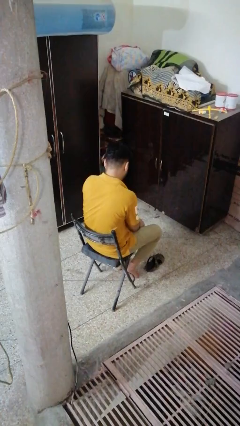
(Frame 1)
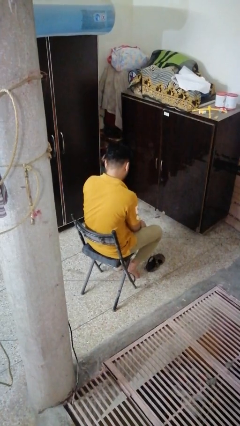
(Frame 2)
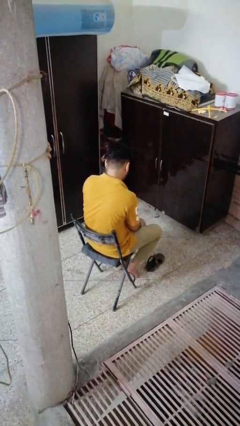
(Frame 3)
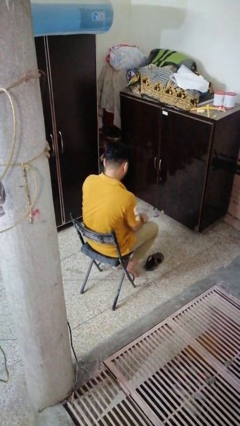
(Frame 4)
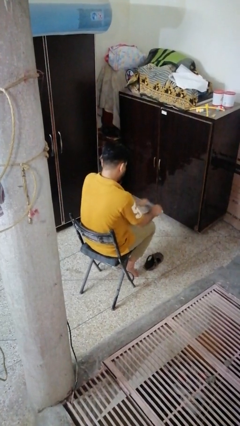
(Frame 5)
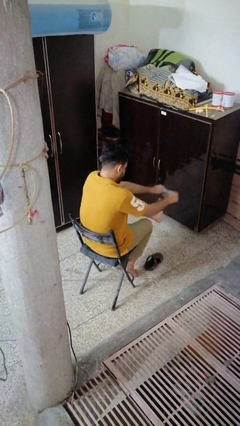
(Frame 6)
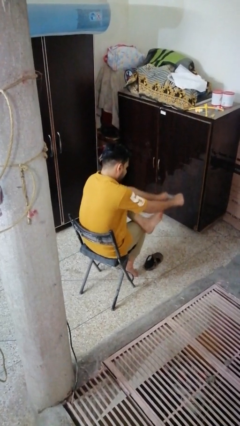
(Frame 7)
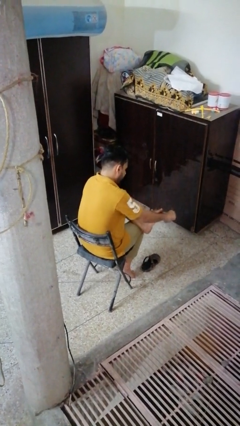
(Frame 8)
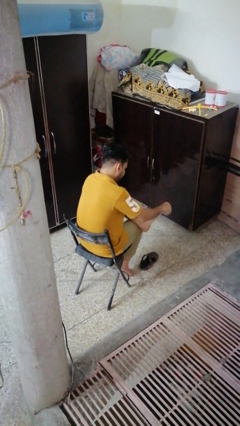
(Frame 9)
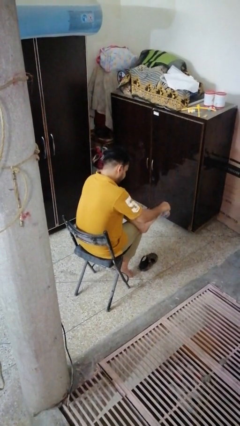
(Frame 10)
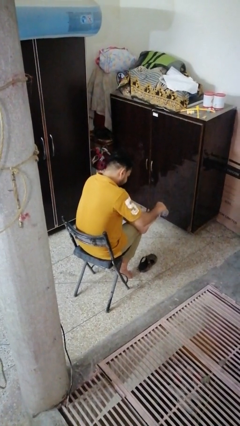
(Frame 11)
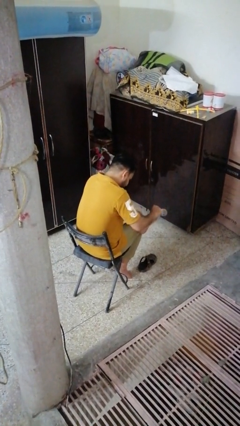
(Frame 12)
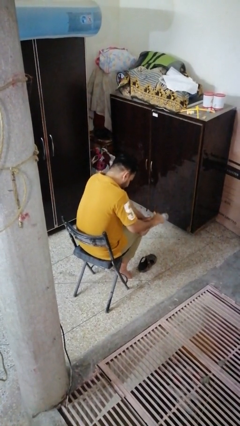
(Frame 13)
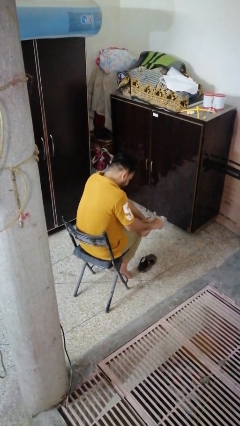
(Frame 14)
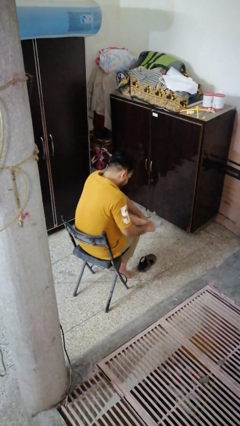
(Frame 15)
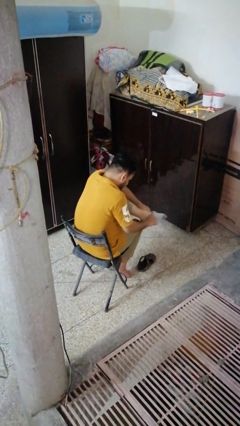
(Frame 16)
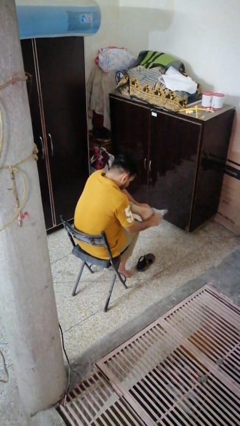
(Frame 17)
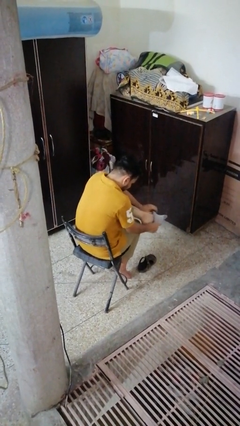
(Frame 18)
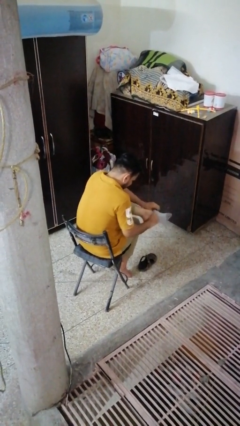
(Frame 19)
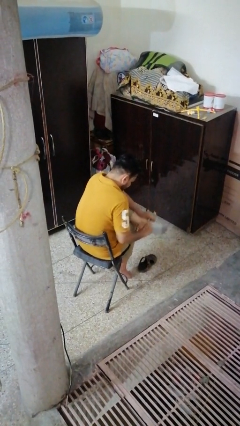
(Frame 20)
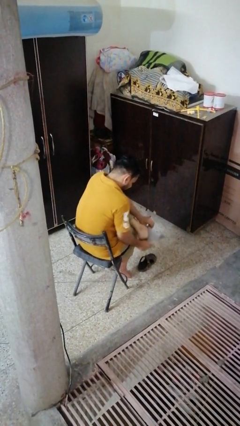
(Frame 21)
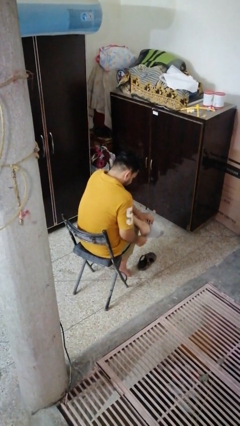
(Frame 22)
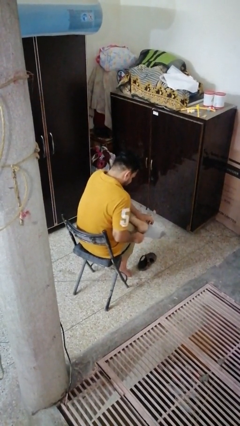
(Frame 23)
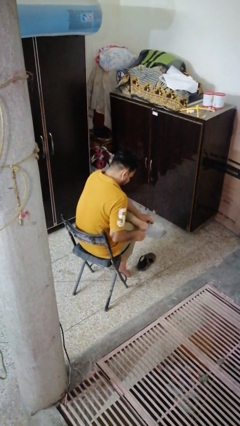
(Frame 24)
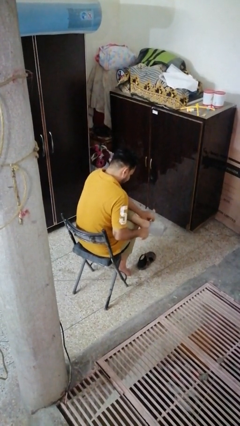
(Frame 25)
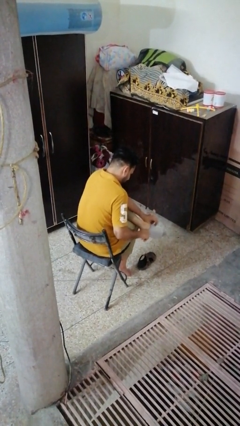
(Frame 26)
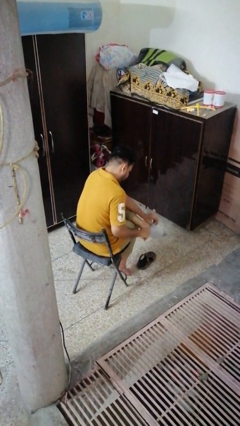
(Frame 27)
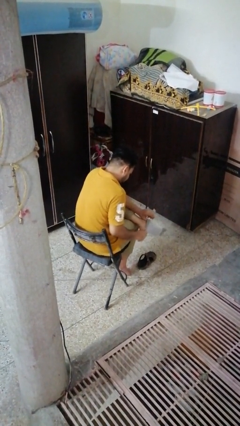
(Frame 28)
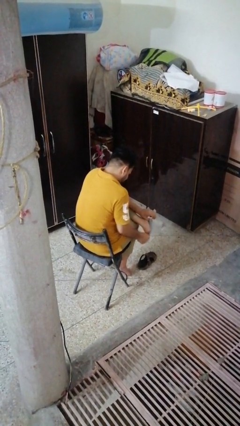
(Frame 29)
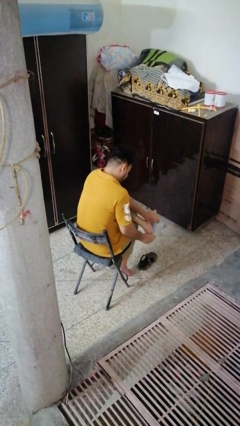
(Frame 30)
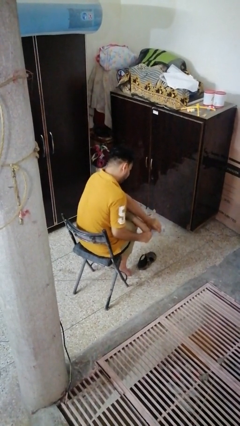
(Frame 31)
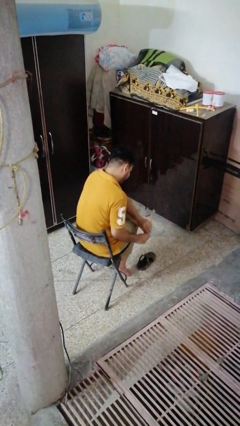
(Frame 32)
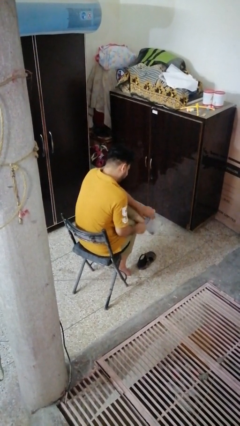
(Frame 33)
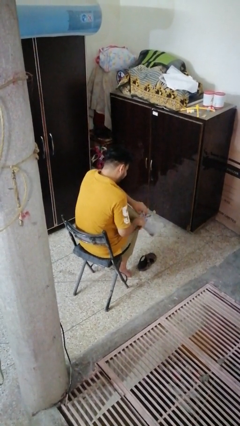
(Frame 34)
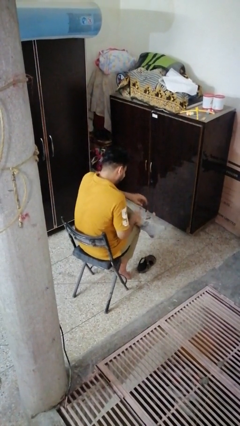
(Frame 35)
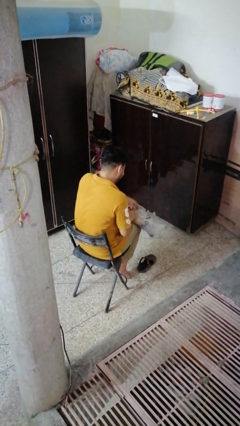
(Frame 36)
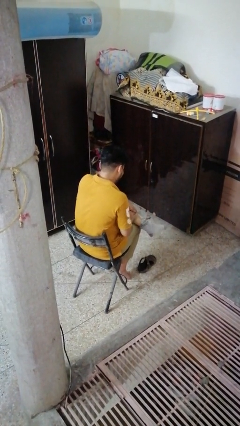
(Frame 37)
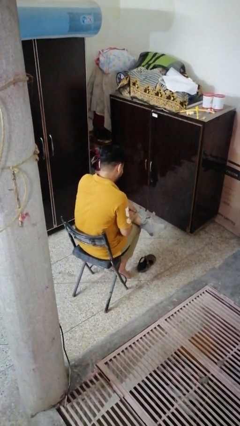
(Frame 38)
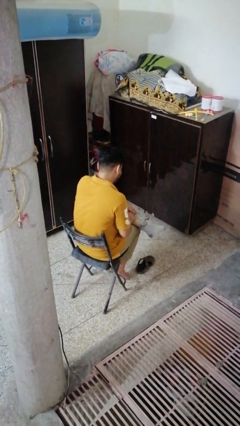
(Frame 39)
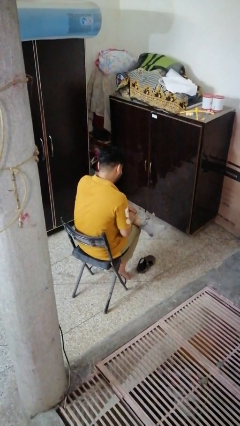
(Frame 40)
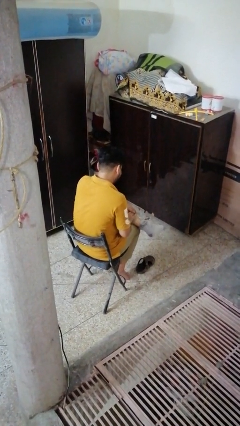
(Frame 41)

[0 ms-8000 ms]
person puts on socks

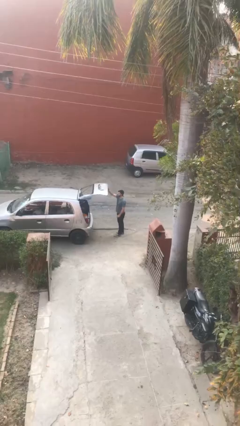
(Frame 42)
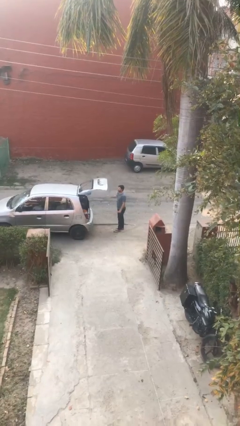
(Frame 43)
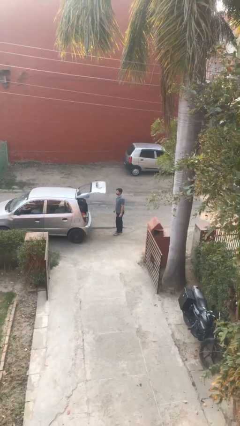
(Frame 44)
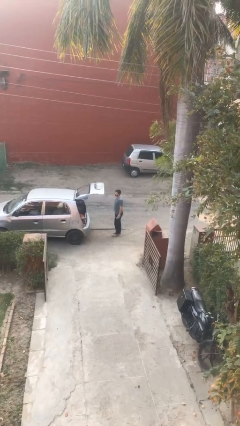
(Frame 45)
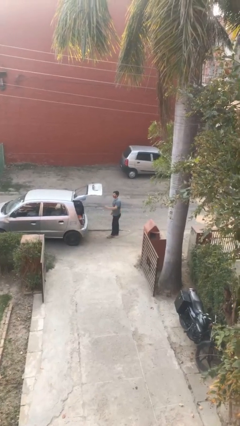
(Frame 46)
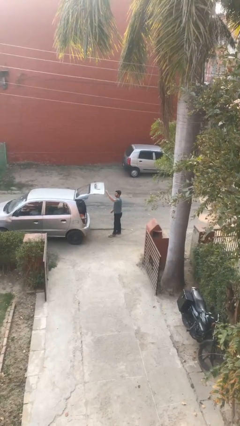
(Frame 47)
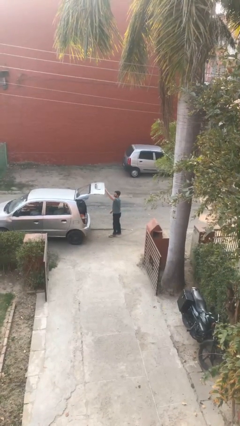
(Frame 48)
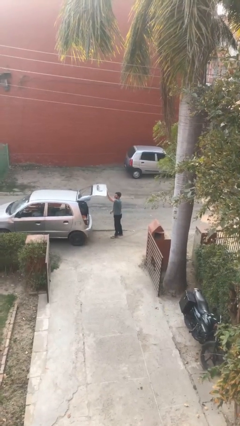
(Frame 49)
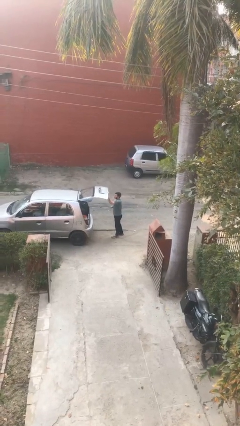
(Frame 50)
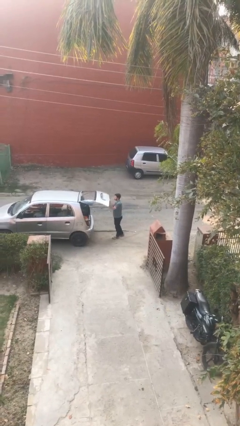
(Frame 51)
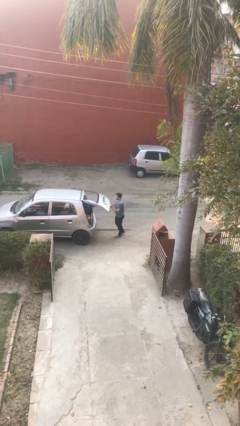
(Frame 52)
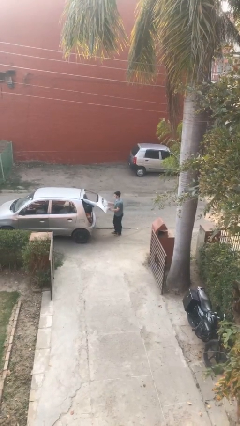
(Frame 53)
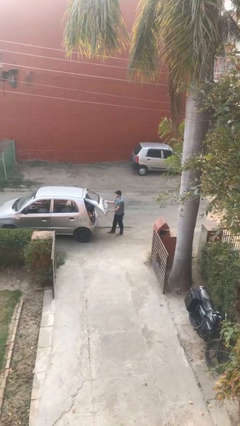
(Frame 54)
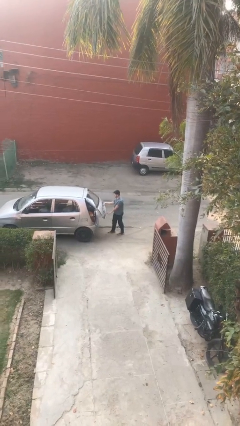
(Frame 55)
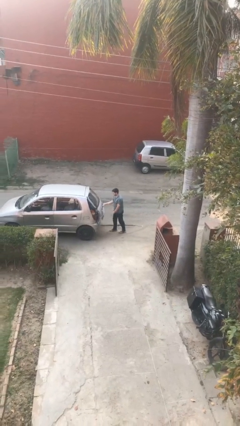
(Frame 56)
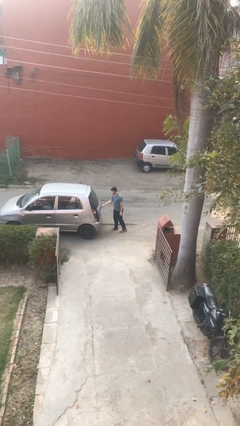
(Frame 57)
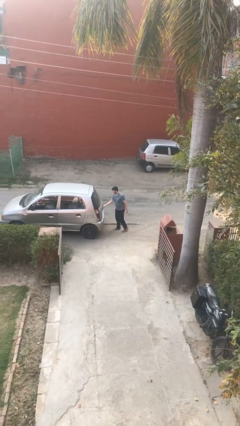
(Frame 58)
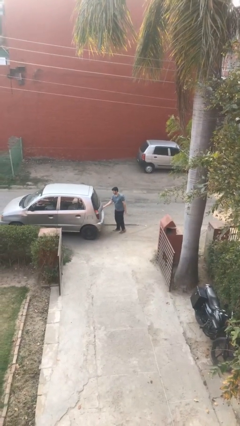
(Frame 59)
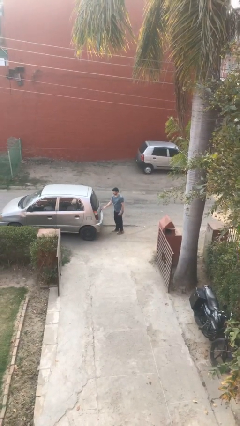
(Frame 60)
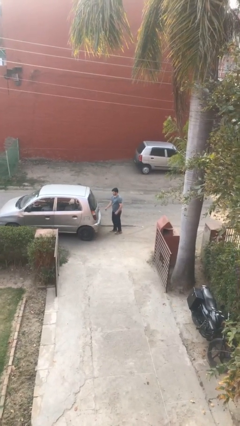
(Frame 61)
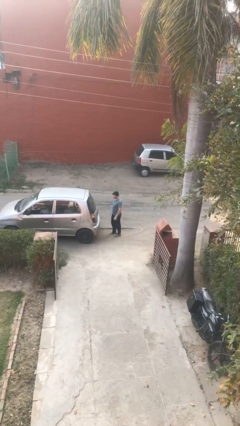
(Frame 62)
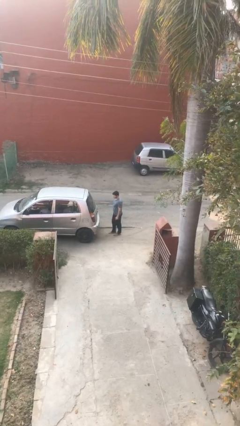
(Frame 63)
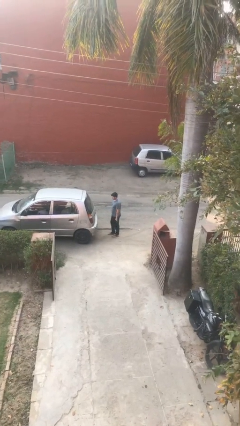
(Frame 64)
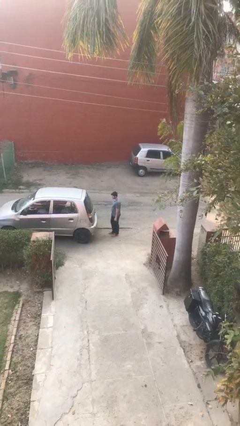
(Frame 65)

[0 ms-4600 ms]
person closes car trunk

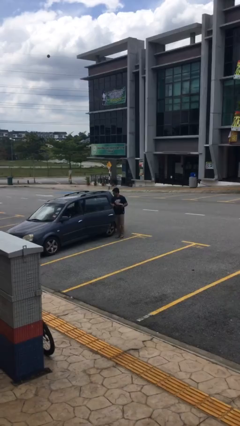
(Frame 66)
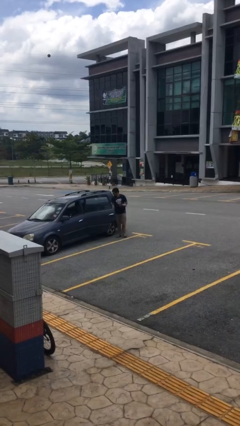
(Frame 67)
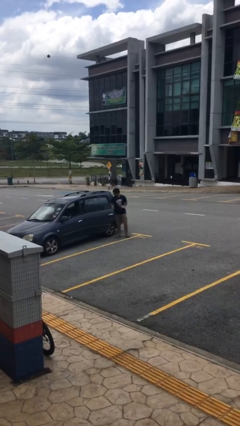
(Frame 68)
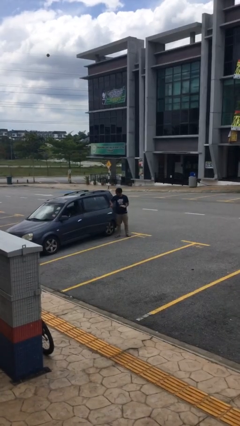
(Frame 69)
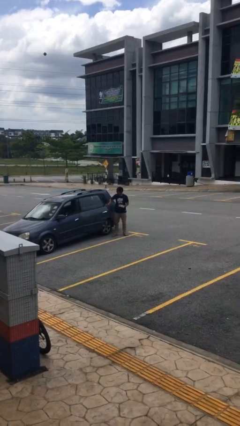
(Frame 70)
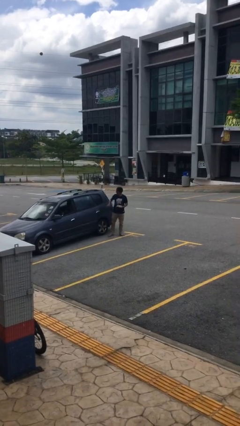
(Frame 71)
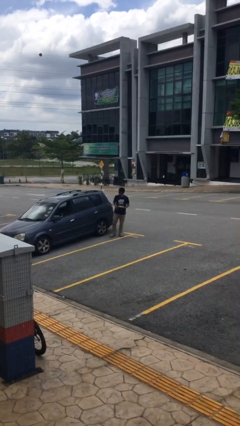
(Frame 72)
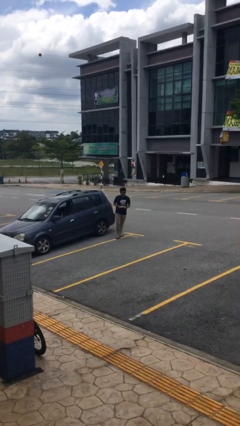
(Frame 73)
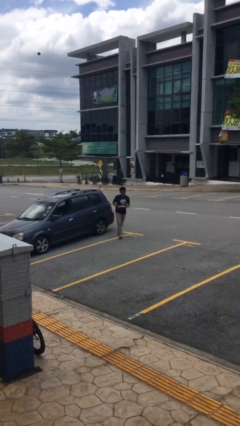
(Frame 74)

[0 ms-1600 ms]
person closes car door

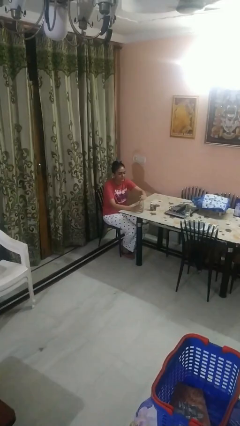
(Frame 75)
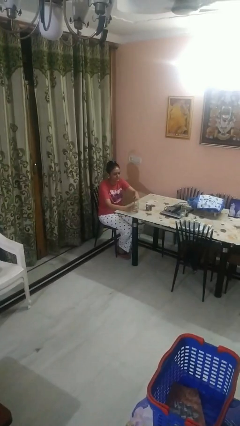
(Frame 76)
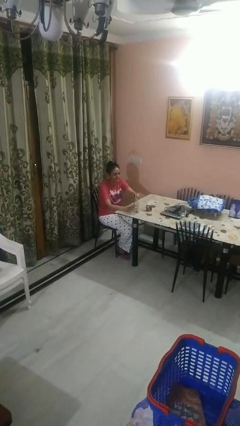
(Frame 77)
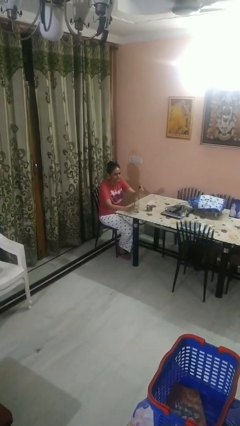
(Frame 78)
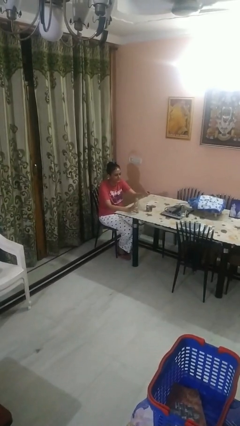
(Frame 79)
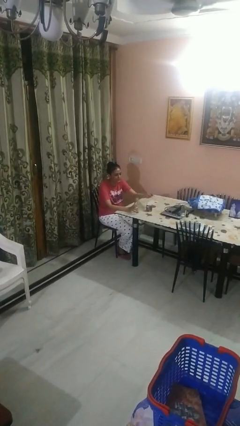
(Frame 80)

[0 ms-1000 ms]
person unscrews lid from bottle

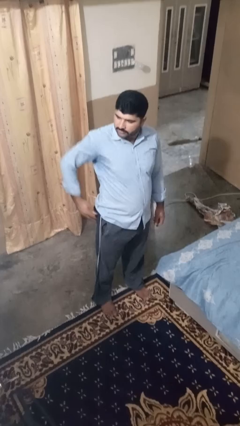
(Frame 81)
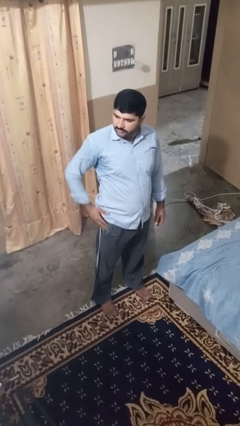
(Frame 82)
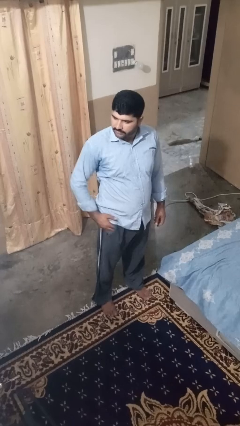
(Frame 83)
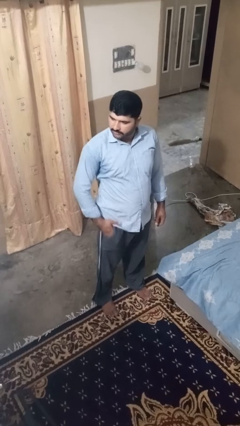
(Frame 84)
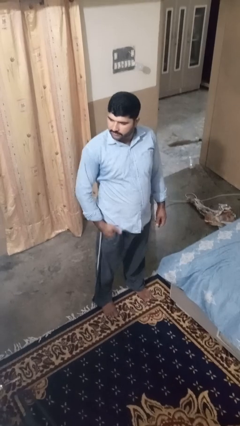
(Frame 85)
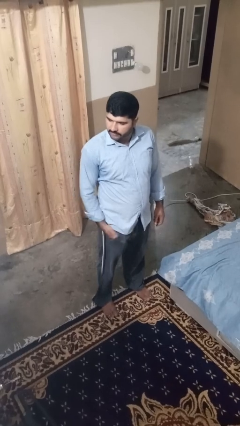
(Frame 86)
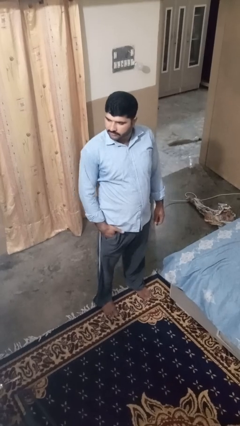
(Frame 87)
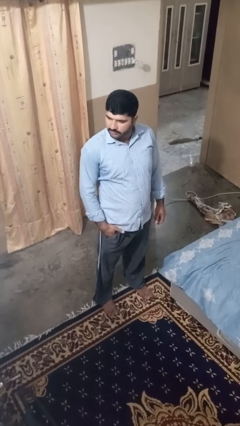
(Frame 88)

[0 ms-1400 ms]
person puts hands in back pockets

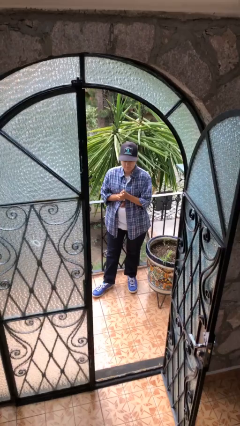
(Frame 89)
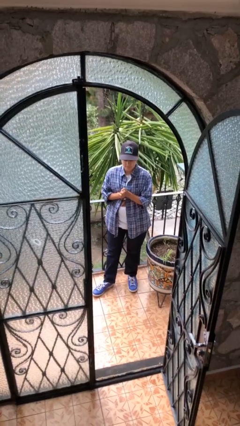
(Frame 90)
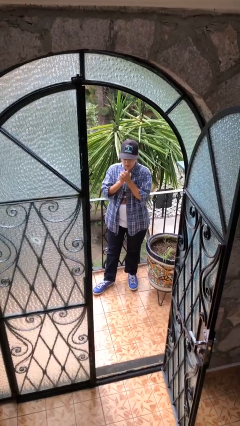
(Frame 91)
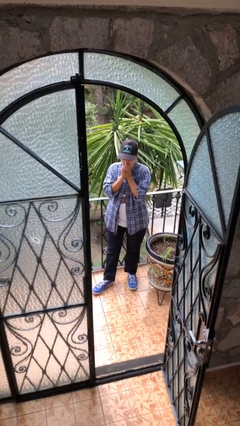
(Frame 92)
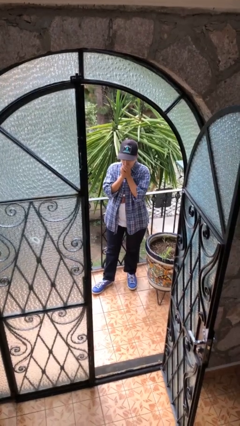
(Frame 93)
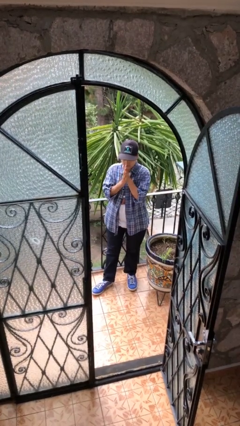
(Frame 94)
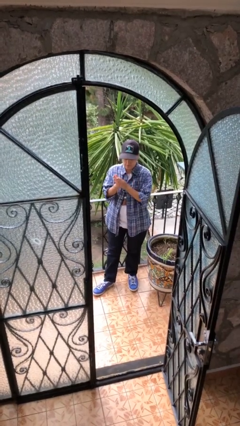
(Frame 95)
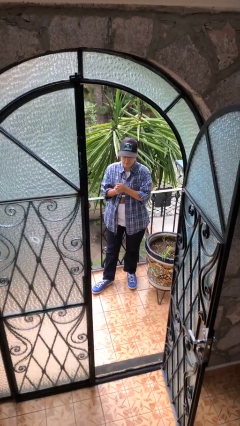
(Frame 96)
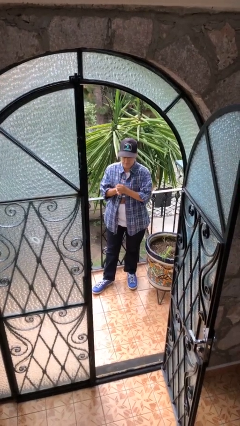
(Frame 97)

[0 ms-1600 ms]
person blows into hands
